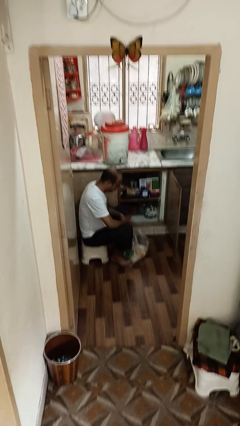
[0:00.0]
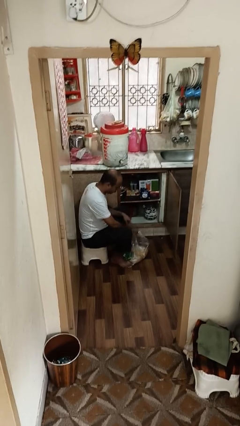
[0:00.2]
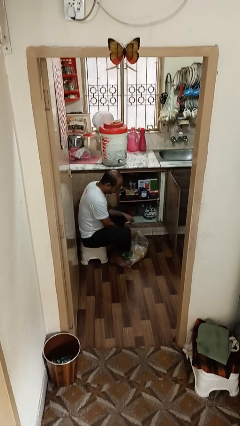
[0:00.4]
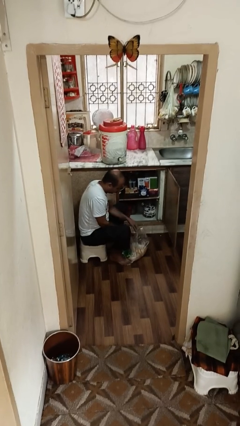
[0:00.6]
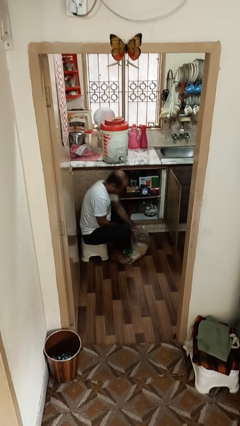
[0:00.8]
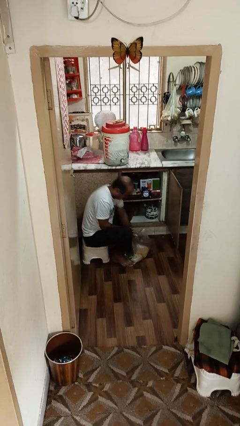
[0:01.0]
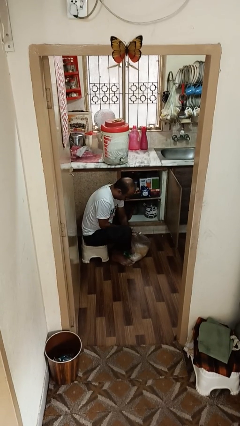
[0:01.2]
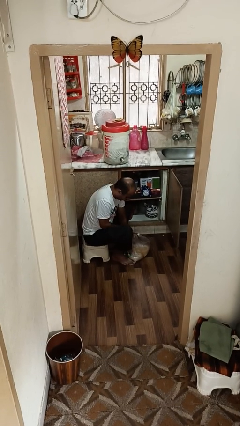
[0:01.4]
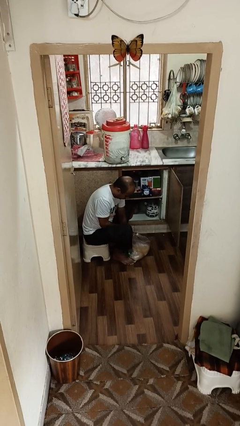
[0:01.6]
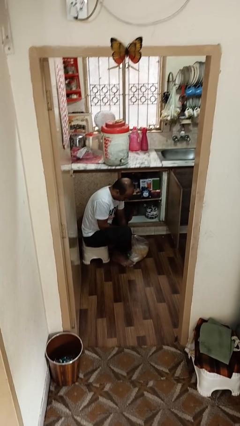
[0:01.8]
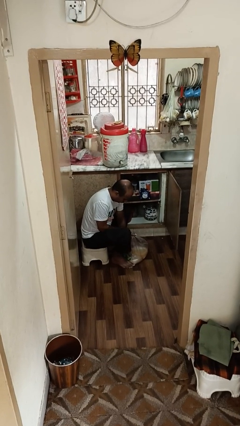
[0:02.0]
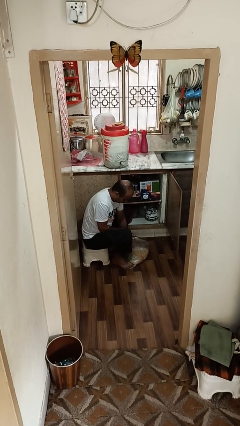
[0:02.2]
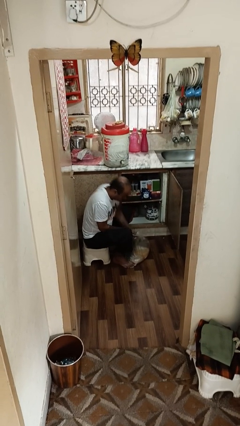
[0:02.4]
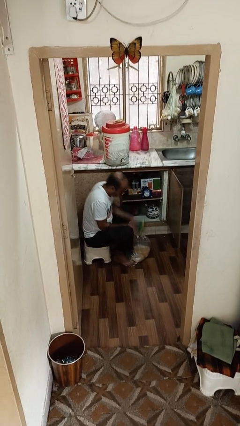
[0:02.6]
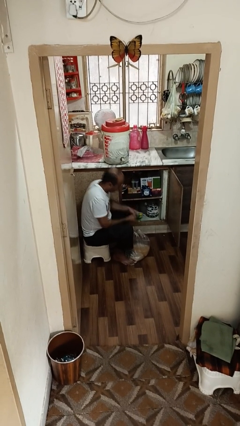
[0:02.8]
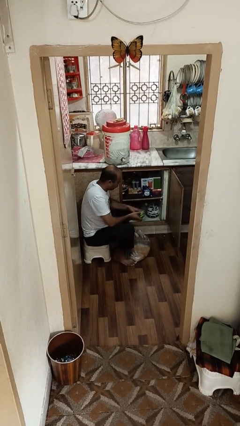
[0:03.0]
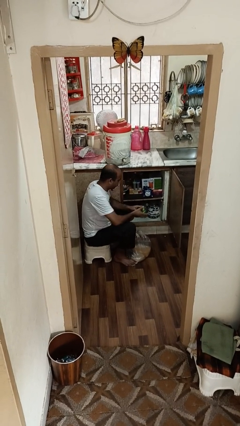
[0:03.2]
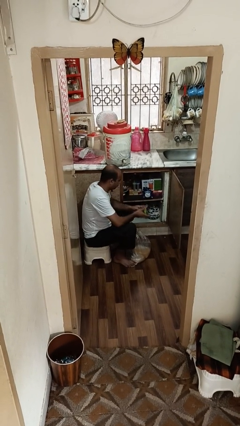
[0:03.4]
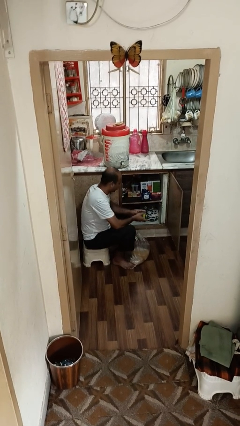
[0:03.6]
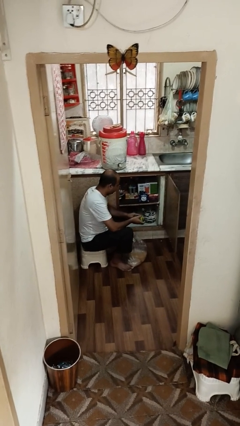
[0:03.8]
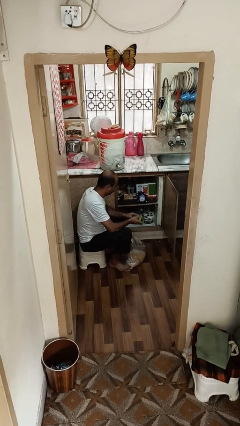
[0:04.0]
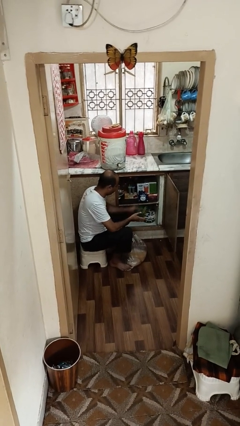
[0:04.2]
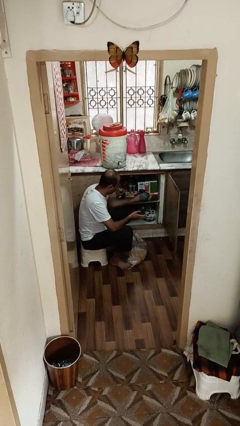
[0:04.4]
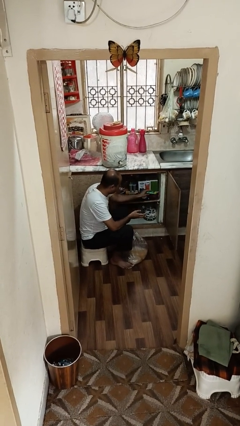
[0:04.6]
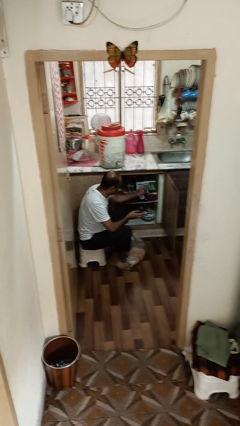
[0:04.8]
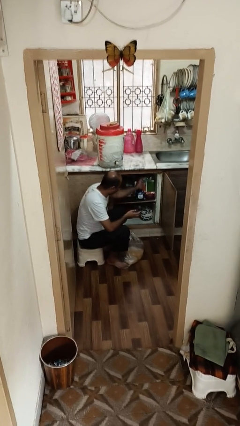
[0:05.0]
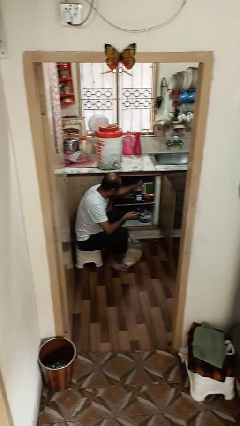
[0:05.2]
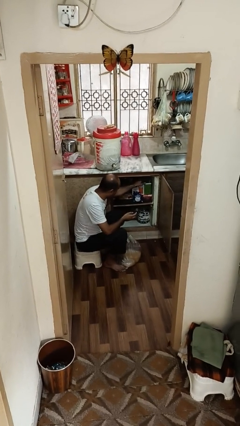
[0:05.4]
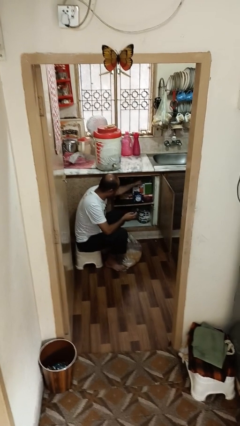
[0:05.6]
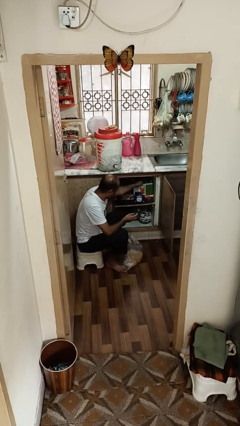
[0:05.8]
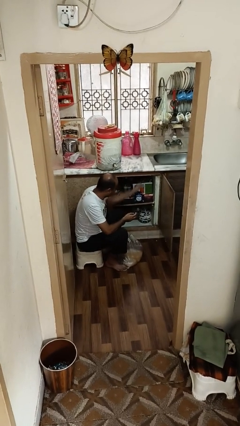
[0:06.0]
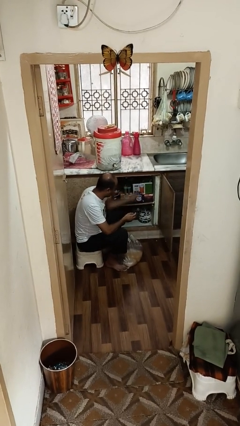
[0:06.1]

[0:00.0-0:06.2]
person loads groceries into cabinet

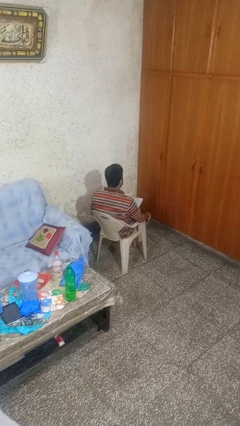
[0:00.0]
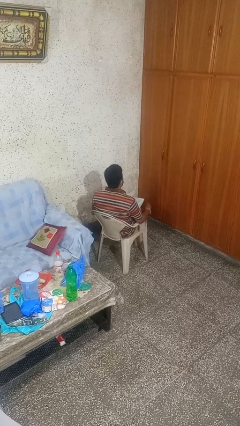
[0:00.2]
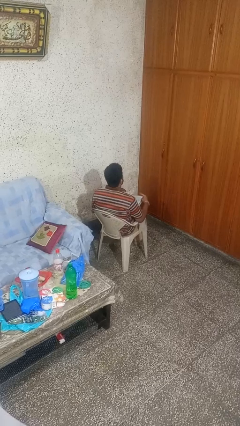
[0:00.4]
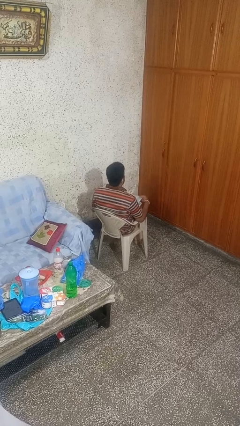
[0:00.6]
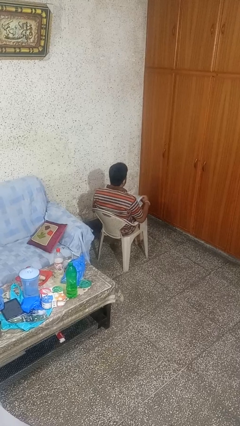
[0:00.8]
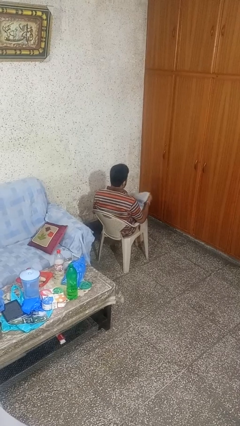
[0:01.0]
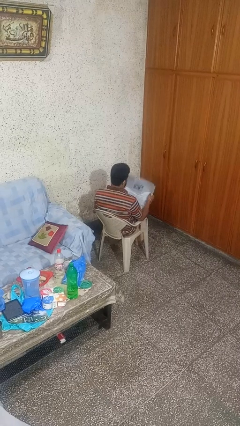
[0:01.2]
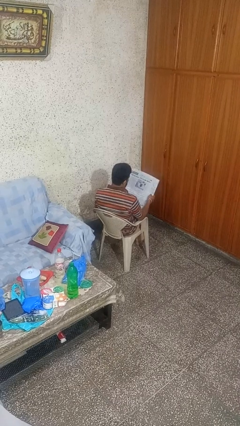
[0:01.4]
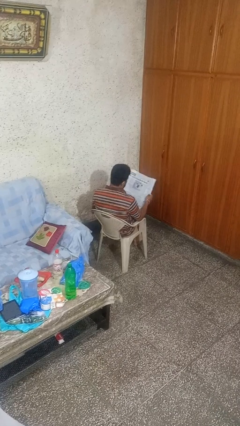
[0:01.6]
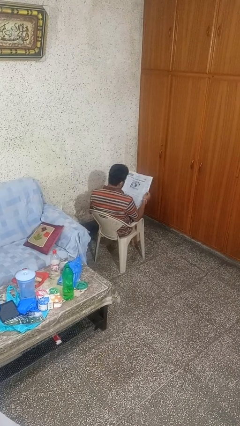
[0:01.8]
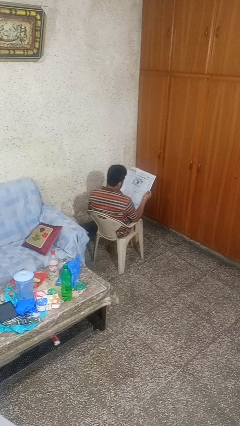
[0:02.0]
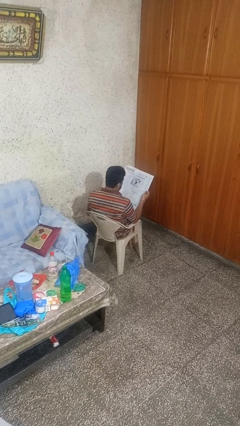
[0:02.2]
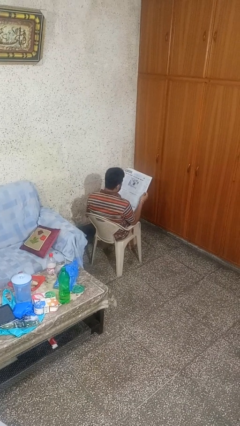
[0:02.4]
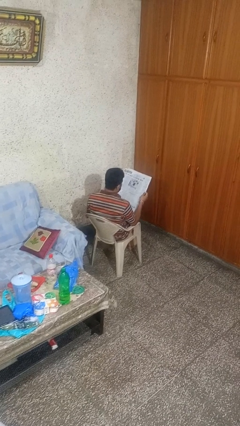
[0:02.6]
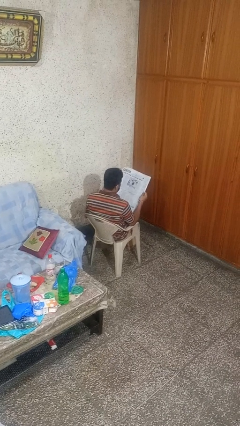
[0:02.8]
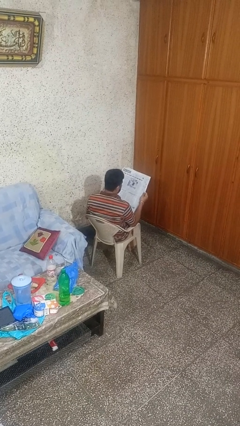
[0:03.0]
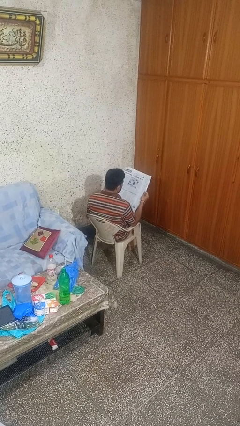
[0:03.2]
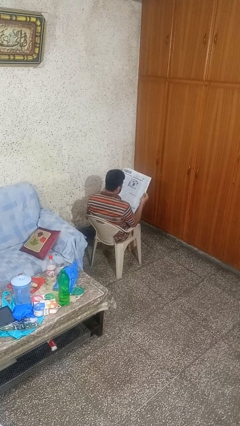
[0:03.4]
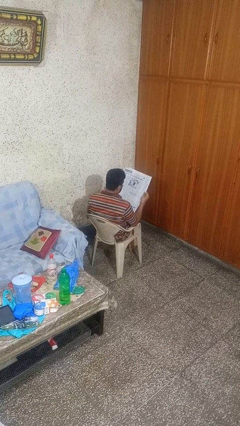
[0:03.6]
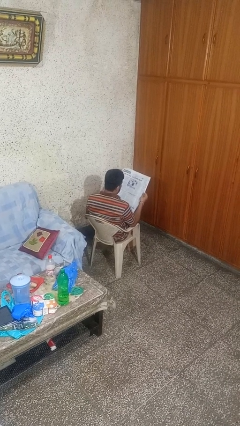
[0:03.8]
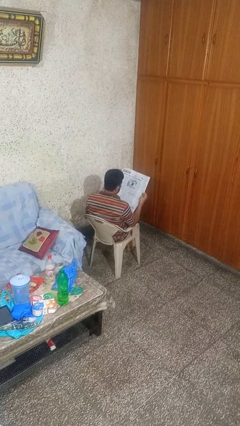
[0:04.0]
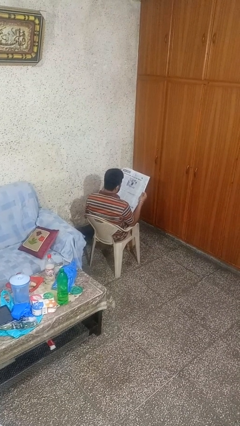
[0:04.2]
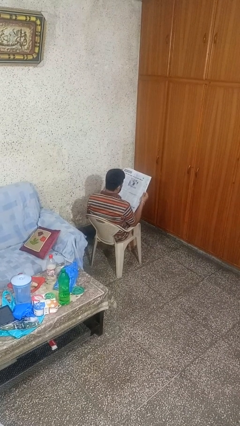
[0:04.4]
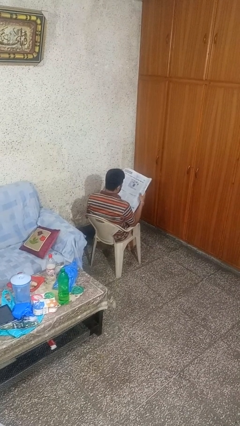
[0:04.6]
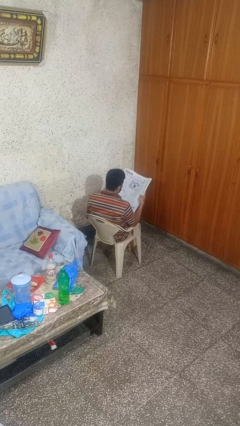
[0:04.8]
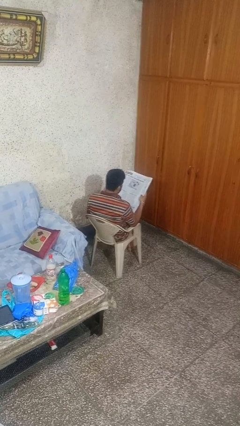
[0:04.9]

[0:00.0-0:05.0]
person reads newspaper

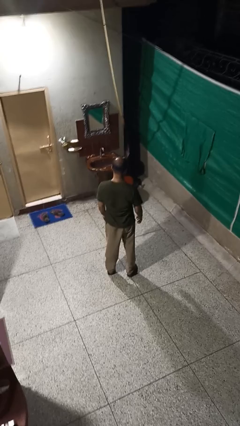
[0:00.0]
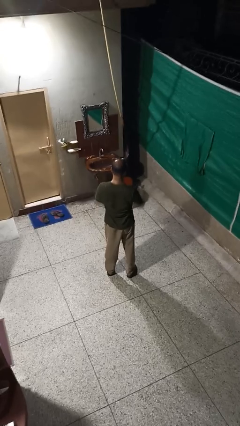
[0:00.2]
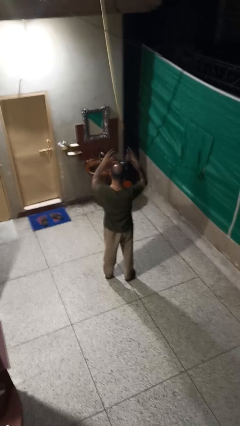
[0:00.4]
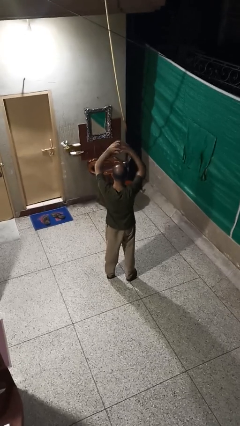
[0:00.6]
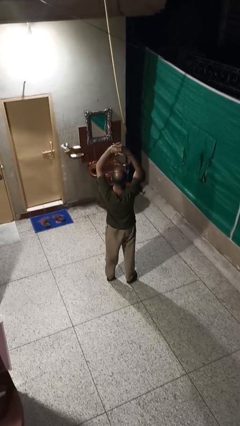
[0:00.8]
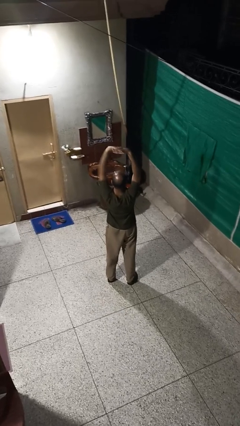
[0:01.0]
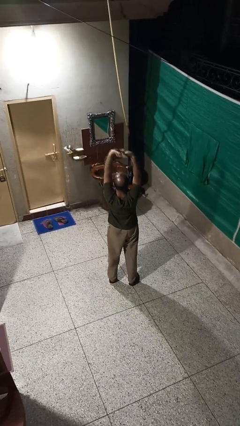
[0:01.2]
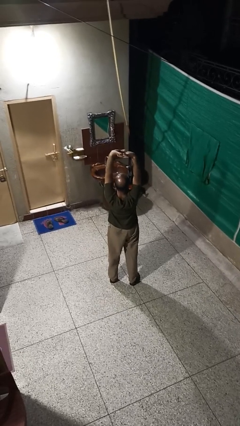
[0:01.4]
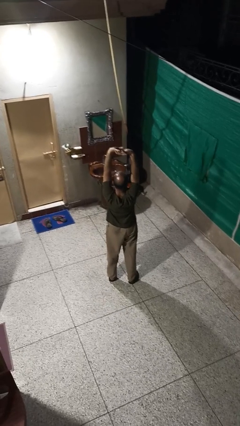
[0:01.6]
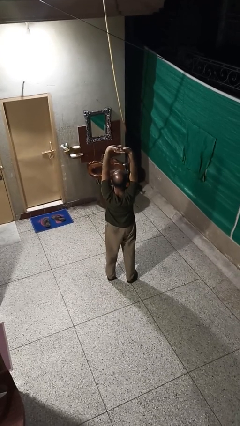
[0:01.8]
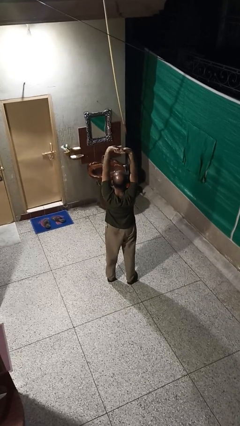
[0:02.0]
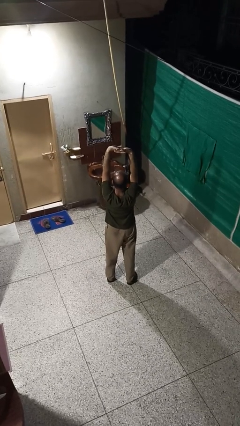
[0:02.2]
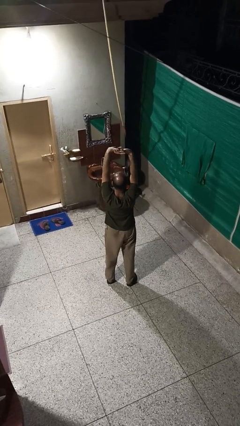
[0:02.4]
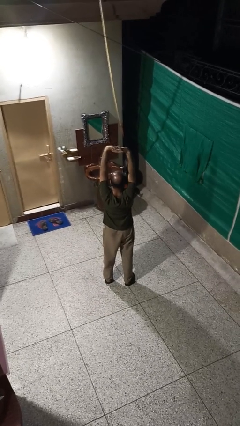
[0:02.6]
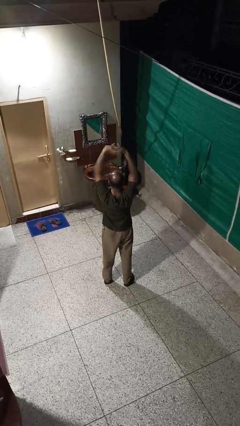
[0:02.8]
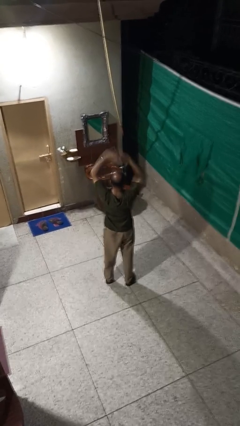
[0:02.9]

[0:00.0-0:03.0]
person stretches arms over head

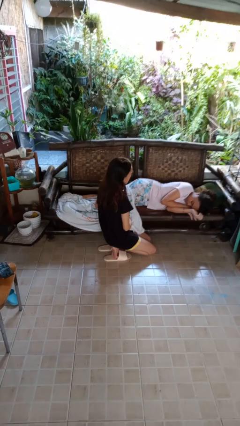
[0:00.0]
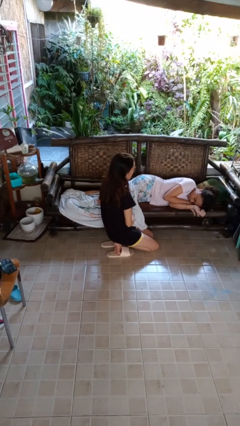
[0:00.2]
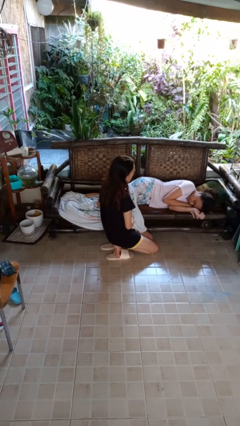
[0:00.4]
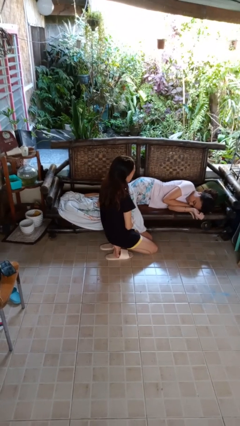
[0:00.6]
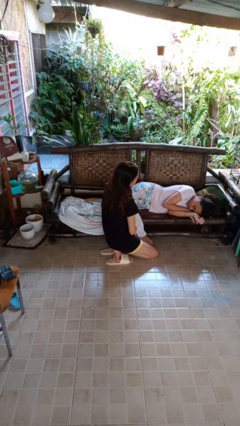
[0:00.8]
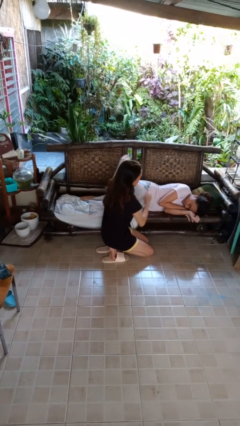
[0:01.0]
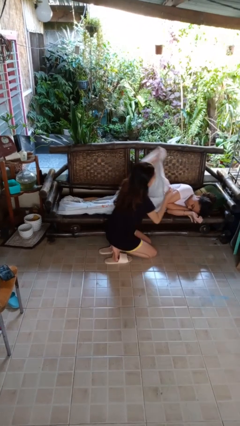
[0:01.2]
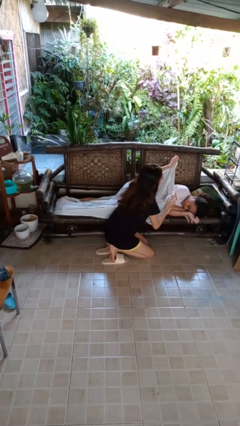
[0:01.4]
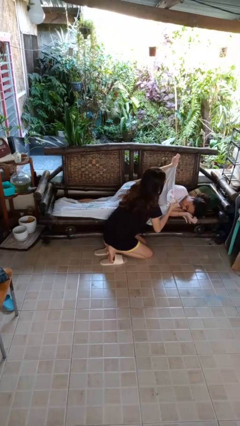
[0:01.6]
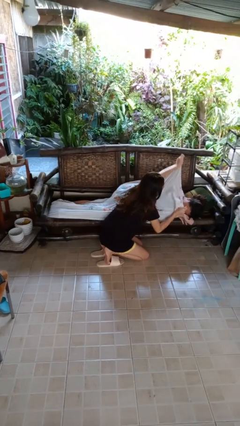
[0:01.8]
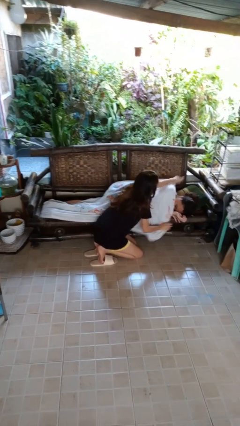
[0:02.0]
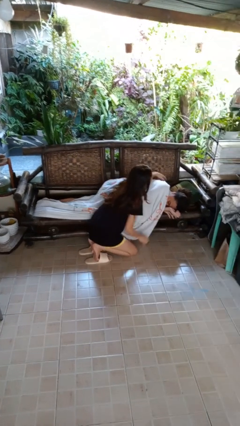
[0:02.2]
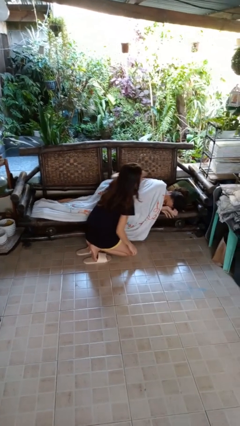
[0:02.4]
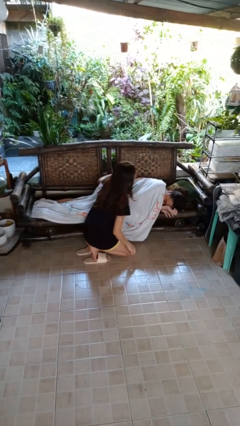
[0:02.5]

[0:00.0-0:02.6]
person covers friend with blanket

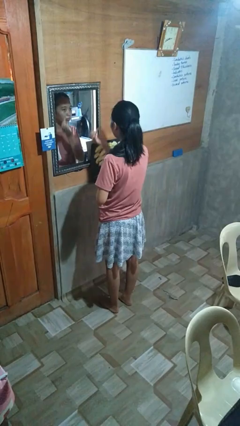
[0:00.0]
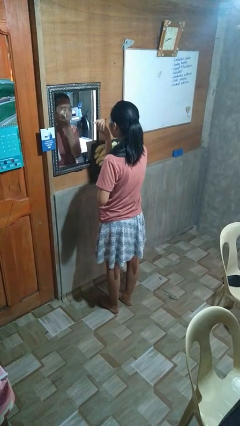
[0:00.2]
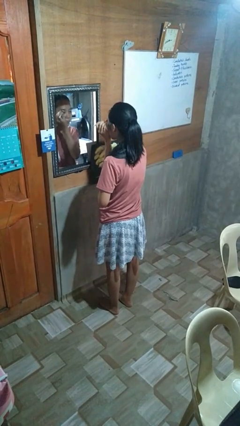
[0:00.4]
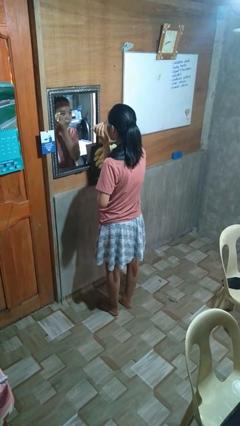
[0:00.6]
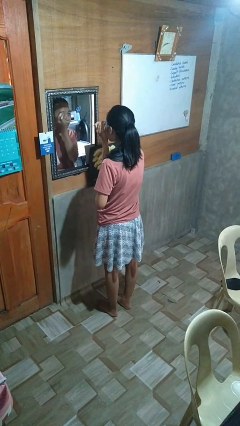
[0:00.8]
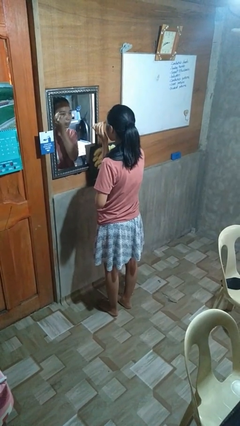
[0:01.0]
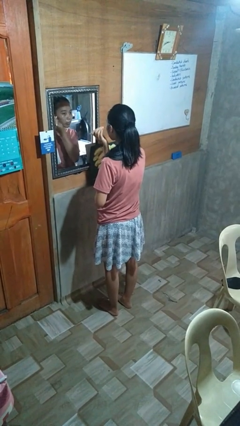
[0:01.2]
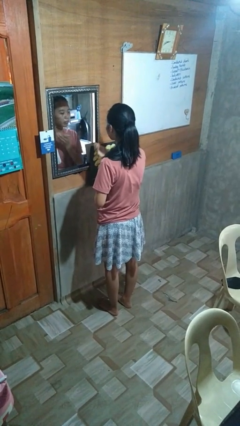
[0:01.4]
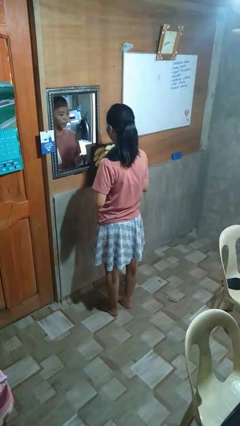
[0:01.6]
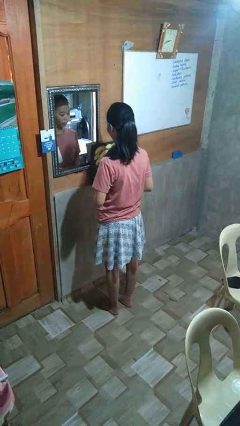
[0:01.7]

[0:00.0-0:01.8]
person applies eye makeup
